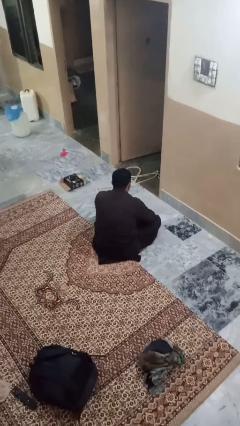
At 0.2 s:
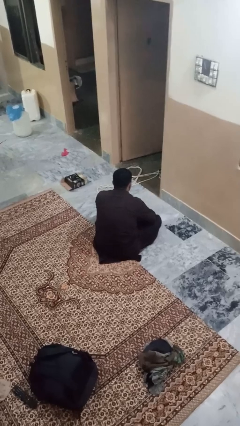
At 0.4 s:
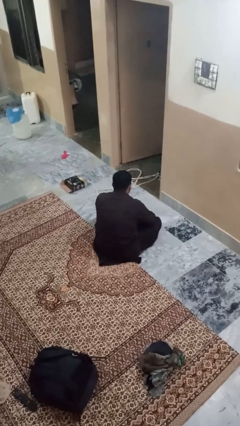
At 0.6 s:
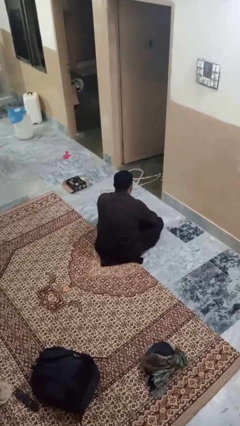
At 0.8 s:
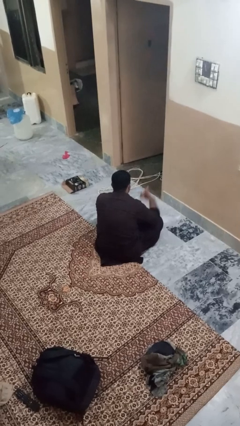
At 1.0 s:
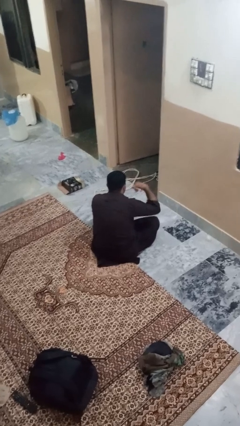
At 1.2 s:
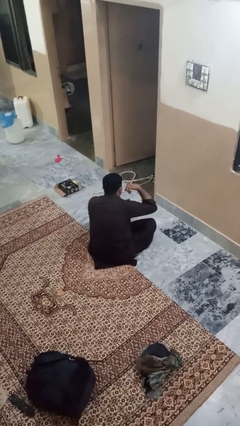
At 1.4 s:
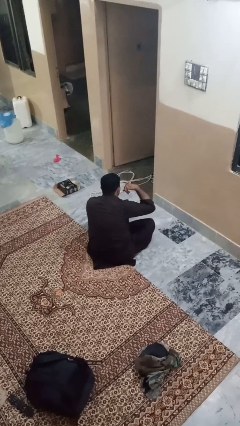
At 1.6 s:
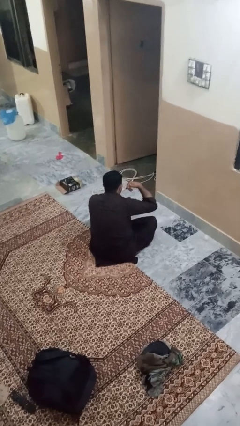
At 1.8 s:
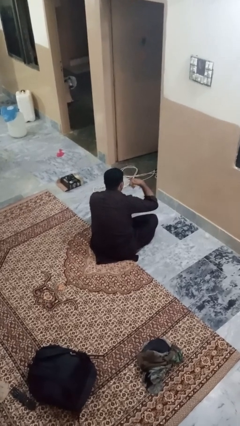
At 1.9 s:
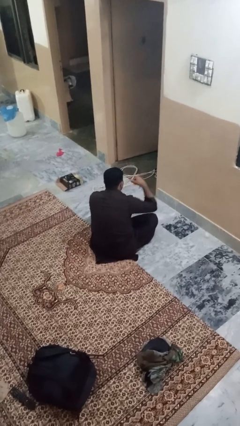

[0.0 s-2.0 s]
person gestures call me

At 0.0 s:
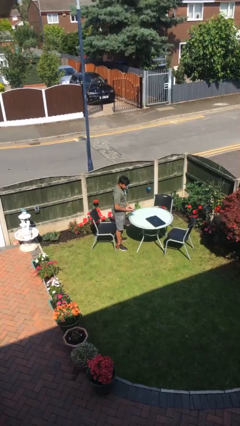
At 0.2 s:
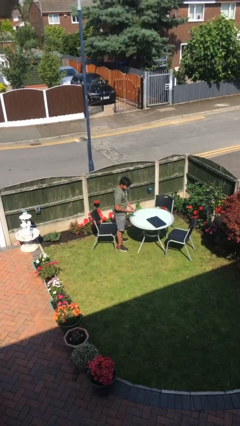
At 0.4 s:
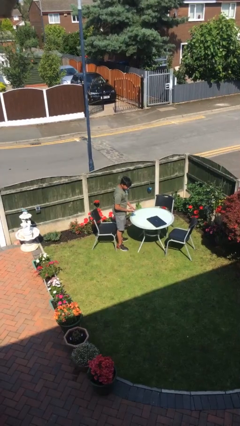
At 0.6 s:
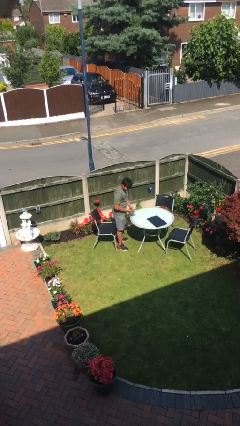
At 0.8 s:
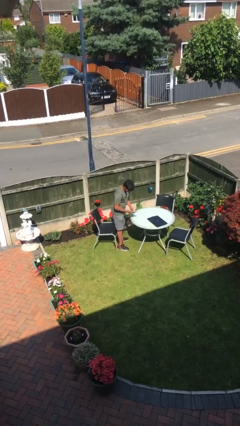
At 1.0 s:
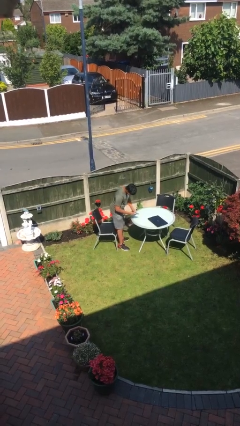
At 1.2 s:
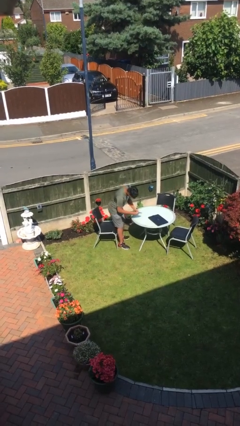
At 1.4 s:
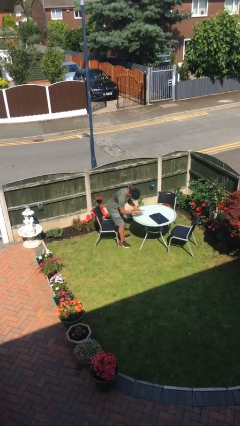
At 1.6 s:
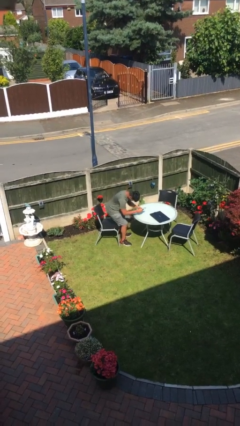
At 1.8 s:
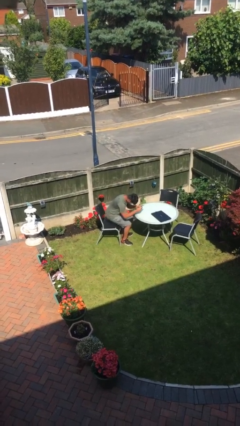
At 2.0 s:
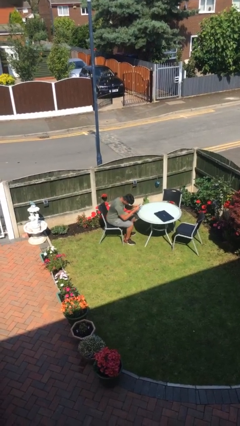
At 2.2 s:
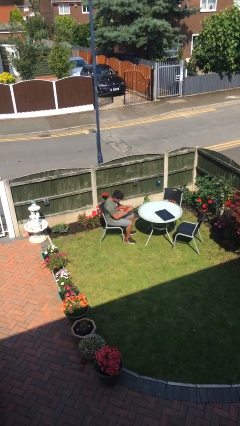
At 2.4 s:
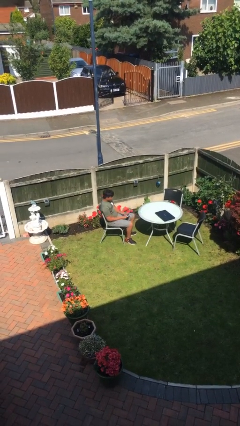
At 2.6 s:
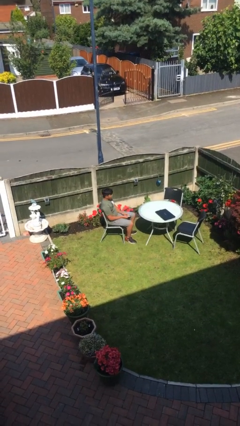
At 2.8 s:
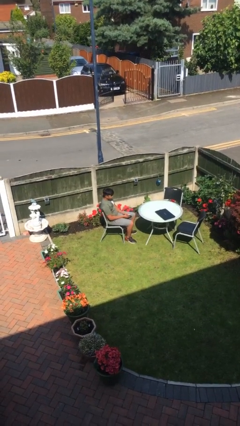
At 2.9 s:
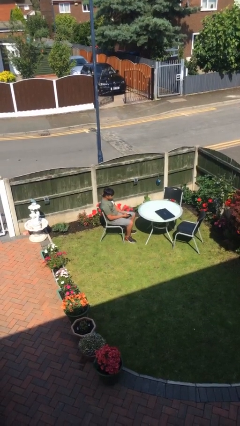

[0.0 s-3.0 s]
person sits down

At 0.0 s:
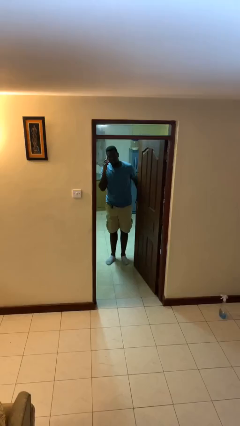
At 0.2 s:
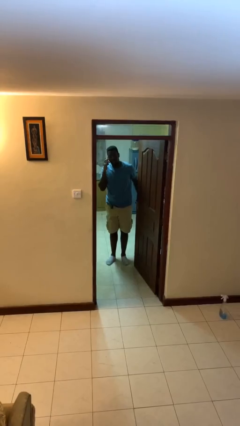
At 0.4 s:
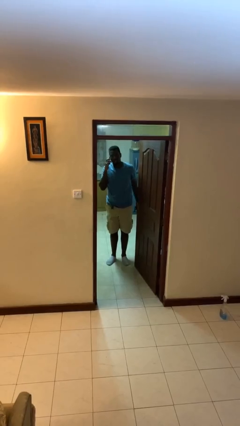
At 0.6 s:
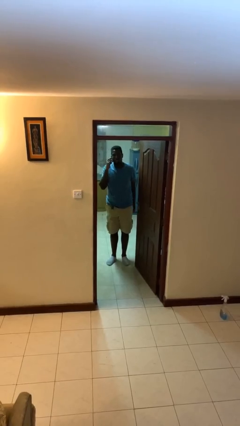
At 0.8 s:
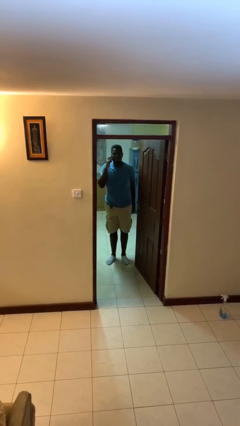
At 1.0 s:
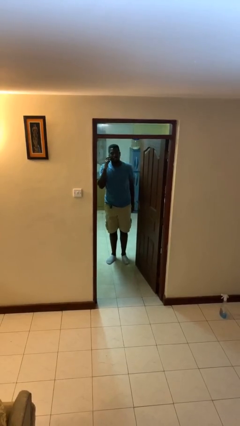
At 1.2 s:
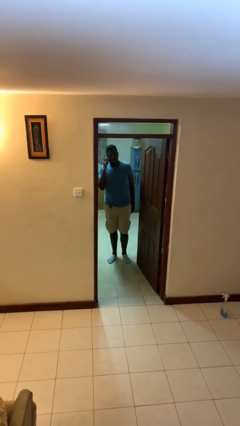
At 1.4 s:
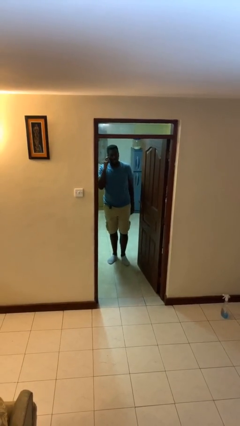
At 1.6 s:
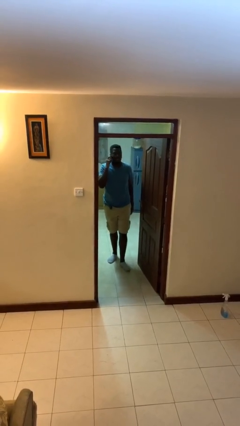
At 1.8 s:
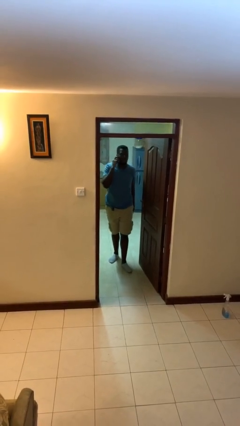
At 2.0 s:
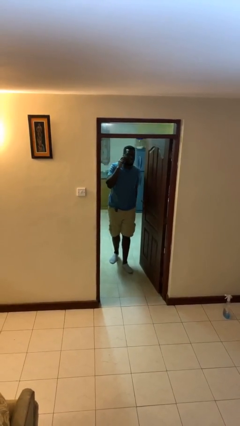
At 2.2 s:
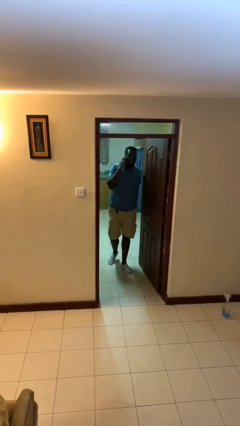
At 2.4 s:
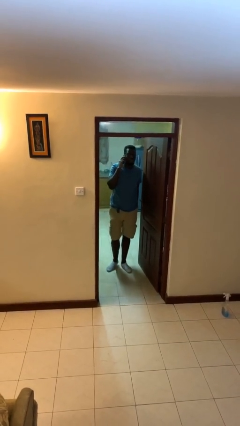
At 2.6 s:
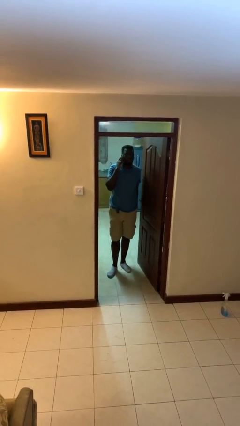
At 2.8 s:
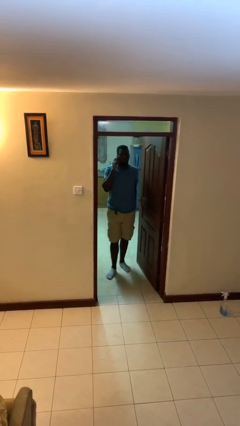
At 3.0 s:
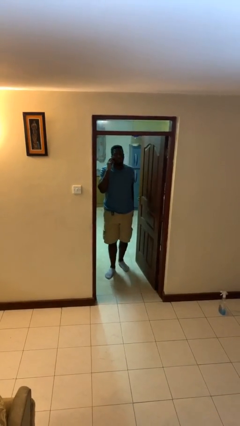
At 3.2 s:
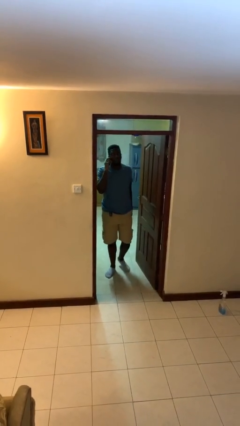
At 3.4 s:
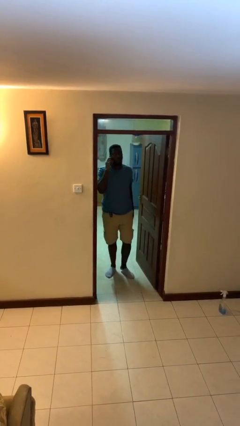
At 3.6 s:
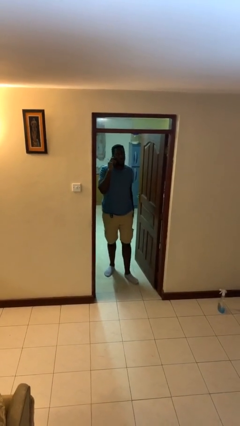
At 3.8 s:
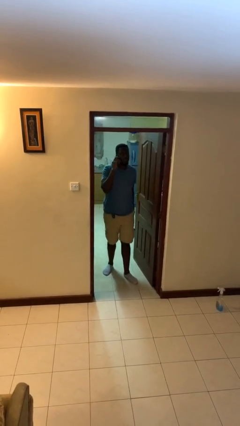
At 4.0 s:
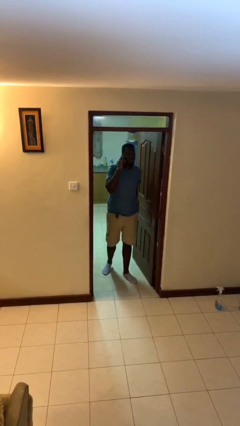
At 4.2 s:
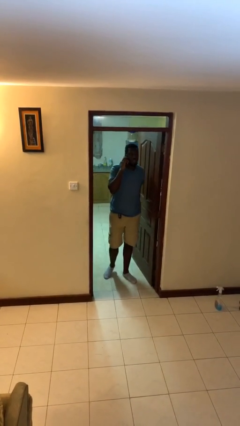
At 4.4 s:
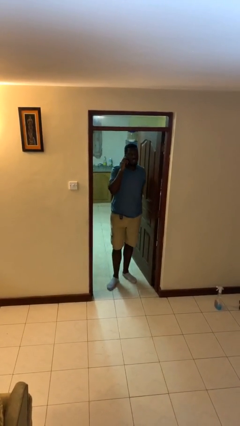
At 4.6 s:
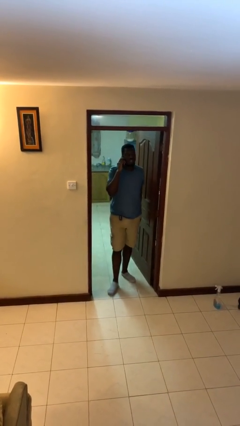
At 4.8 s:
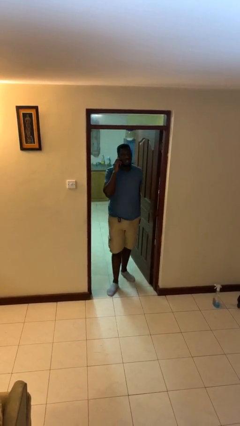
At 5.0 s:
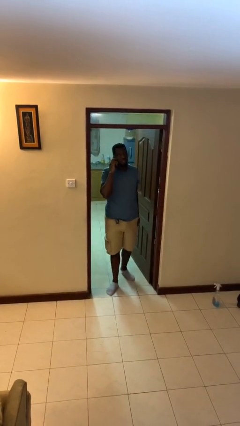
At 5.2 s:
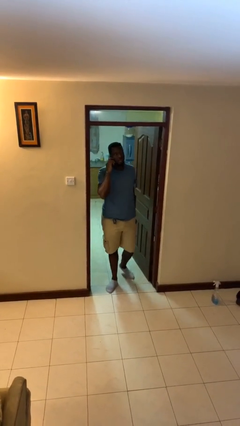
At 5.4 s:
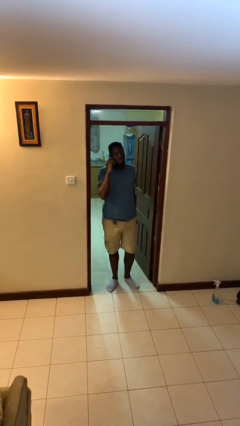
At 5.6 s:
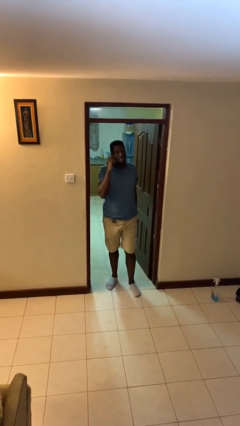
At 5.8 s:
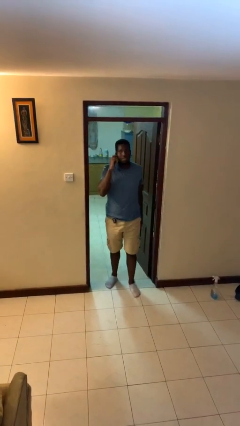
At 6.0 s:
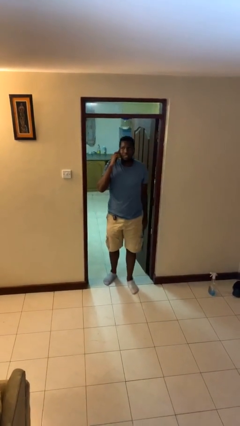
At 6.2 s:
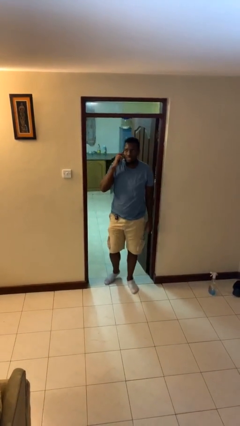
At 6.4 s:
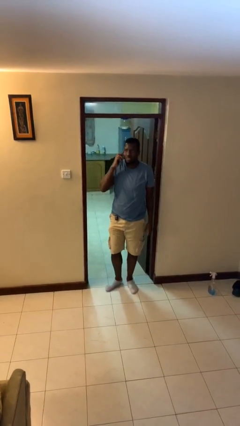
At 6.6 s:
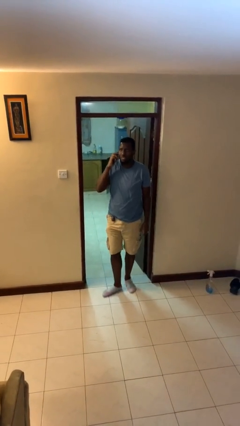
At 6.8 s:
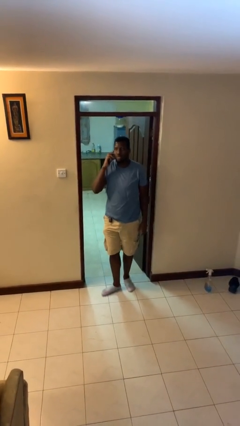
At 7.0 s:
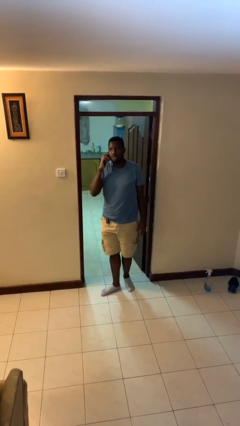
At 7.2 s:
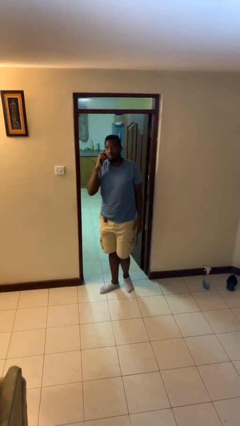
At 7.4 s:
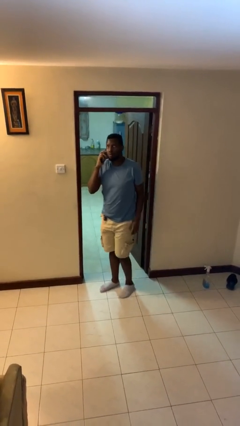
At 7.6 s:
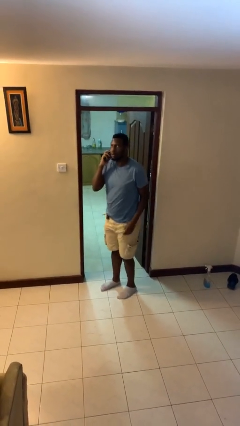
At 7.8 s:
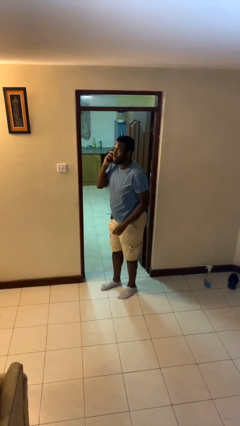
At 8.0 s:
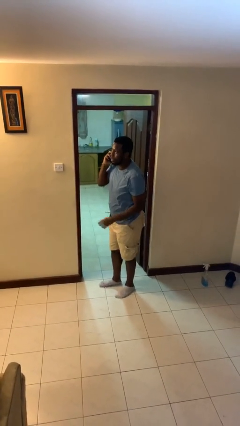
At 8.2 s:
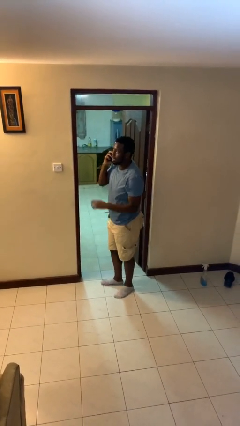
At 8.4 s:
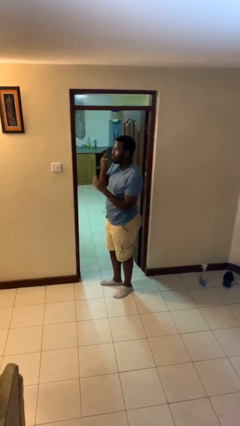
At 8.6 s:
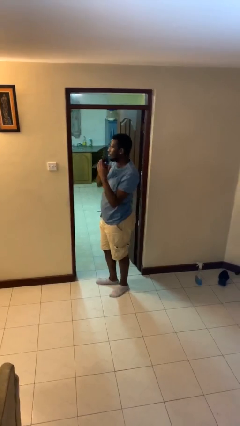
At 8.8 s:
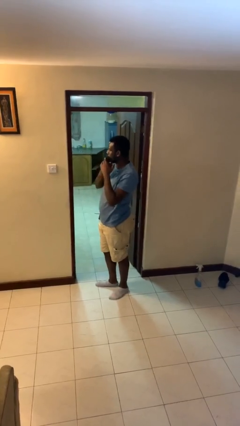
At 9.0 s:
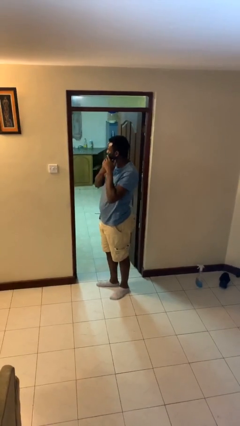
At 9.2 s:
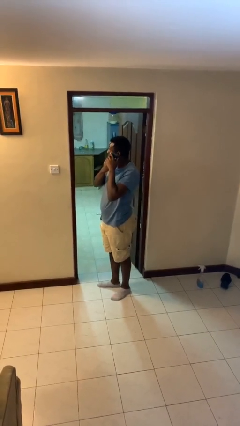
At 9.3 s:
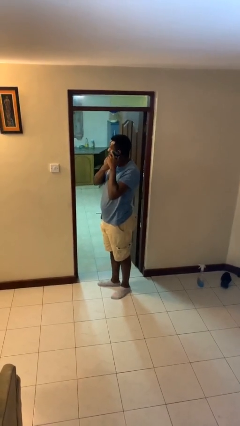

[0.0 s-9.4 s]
person enters scene through structure

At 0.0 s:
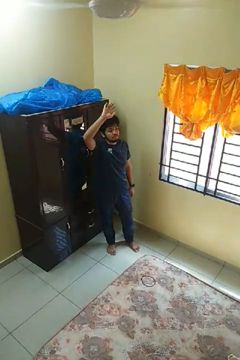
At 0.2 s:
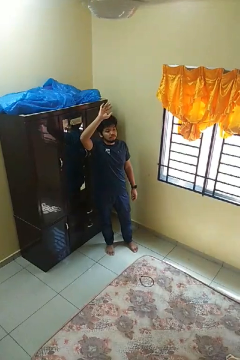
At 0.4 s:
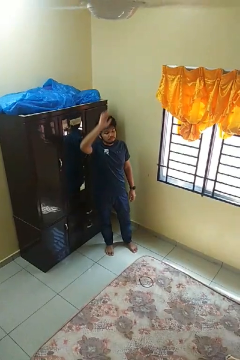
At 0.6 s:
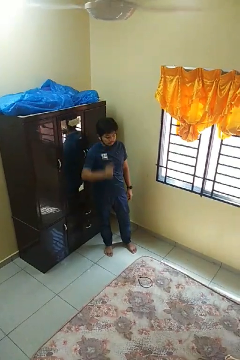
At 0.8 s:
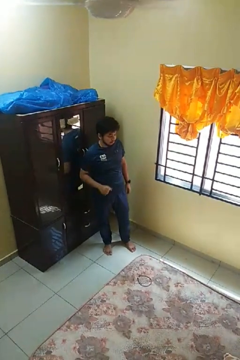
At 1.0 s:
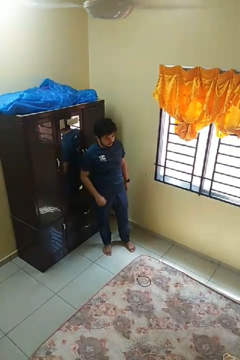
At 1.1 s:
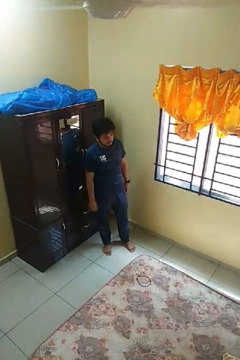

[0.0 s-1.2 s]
person gestures lower hand

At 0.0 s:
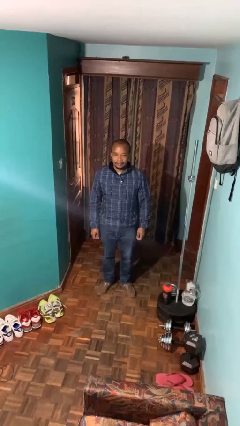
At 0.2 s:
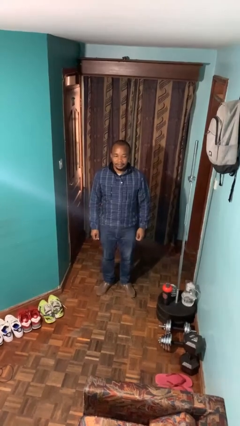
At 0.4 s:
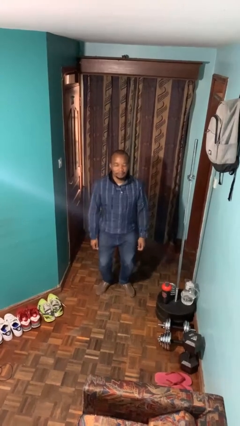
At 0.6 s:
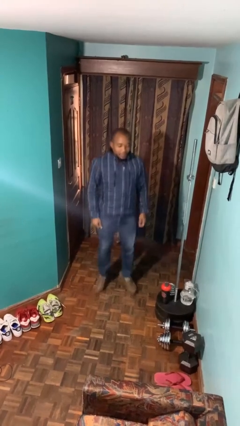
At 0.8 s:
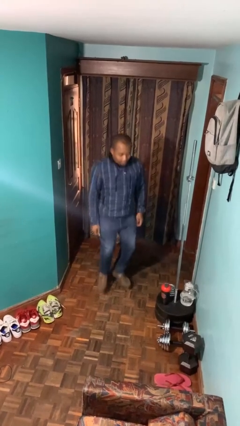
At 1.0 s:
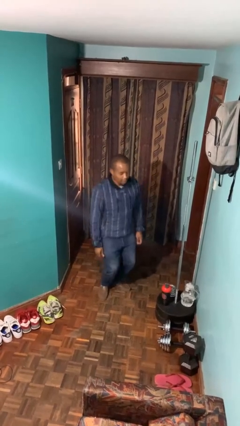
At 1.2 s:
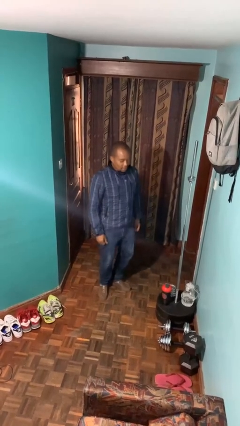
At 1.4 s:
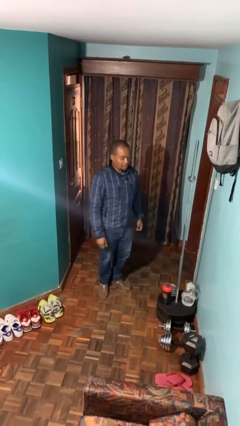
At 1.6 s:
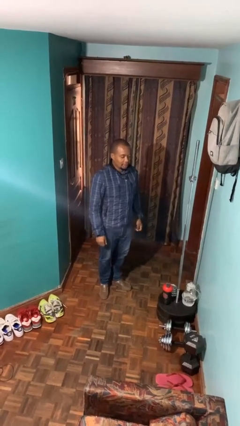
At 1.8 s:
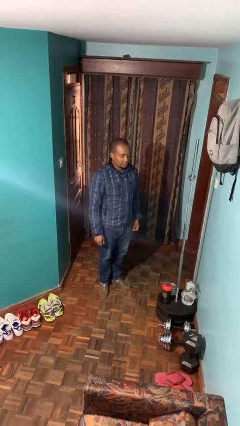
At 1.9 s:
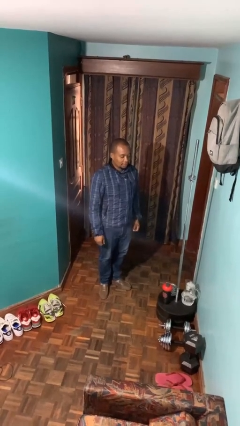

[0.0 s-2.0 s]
person jumps
